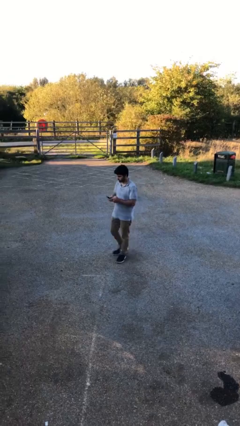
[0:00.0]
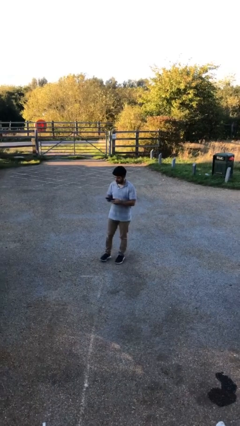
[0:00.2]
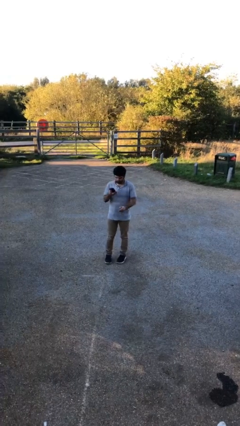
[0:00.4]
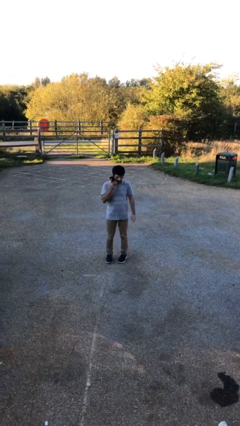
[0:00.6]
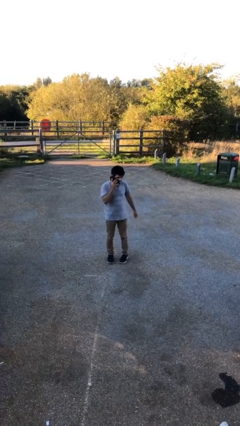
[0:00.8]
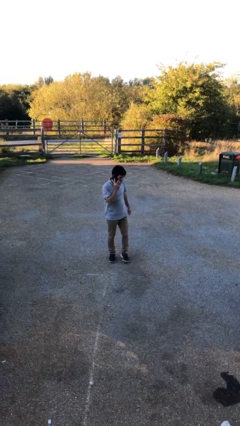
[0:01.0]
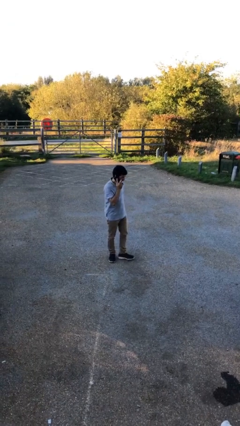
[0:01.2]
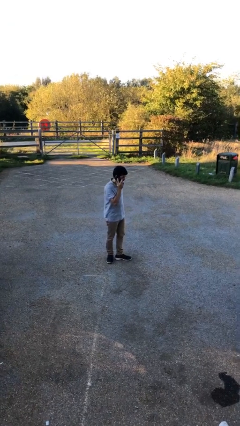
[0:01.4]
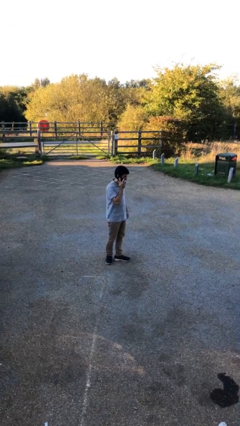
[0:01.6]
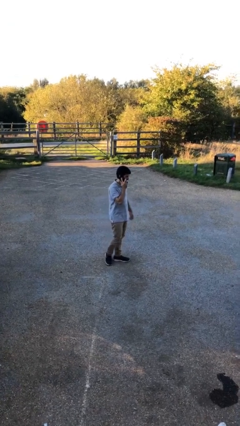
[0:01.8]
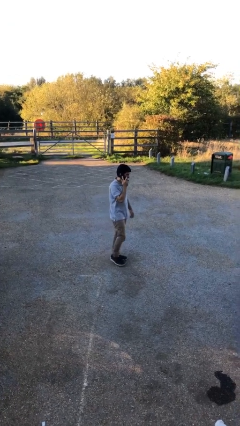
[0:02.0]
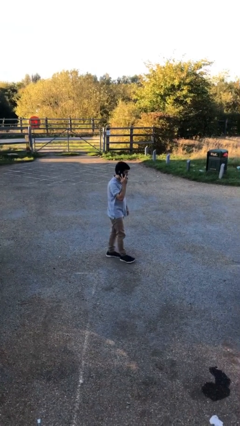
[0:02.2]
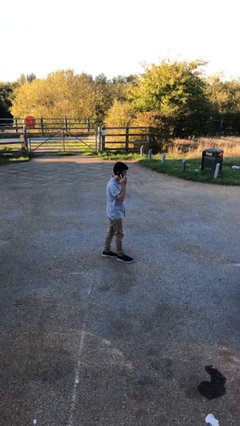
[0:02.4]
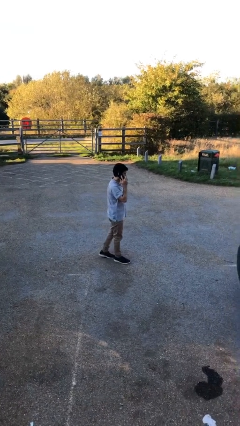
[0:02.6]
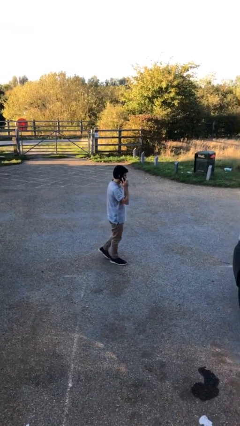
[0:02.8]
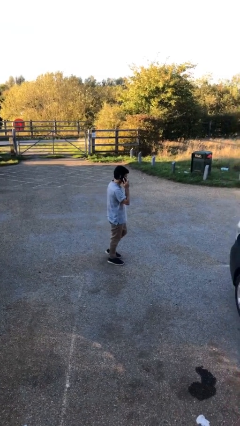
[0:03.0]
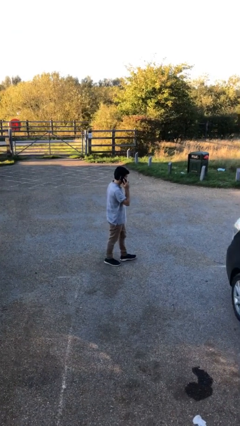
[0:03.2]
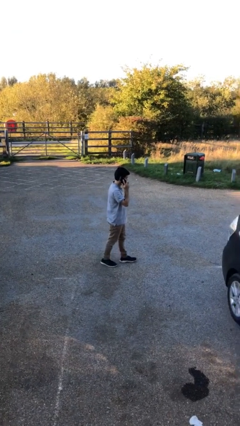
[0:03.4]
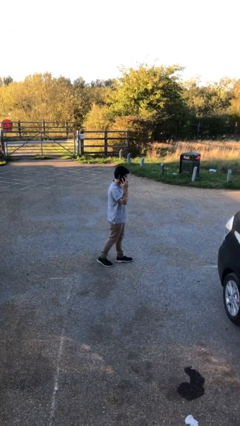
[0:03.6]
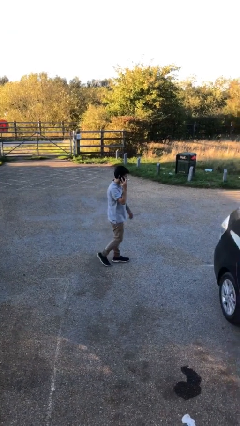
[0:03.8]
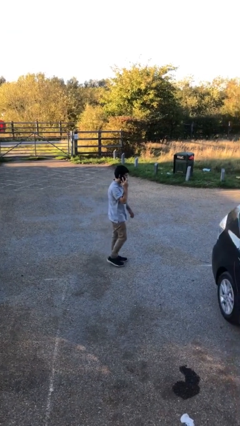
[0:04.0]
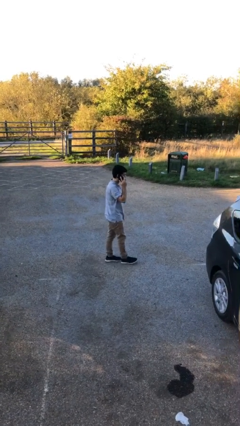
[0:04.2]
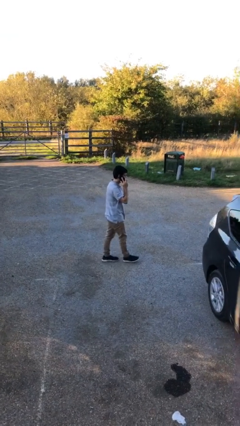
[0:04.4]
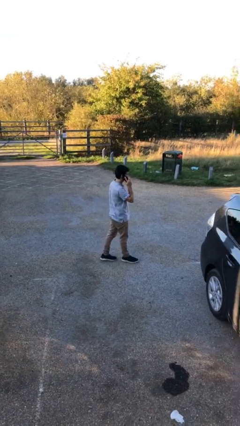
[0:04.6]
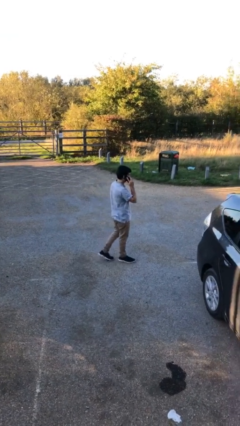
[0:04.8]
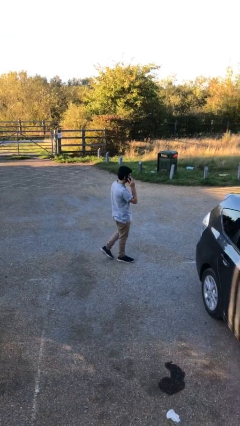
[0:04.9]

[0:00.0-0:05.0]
person talks on phone

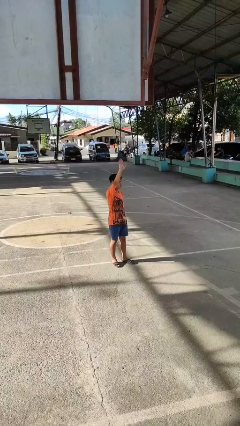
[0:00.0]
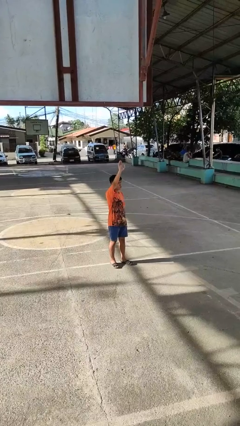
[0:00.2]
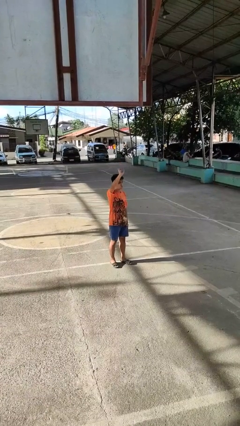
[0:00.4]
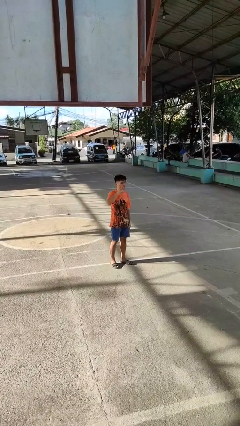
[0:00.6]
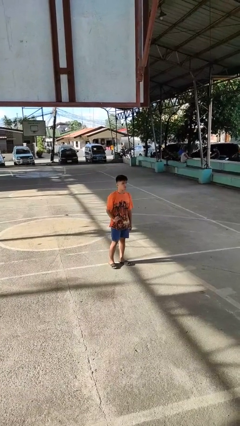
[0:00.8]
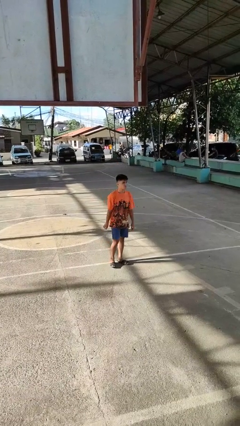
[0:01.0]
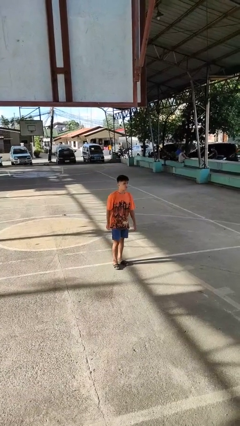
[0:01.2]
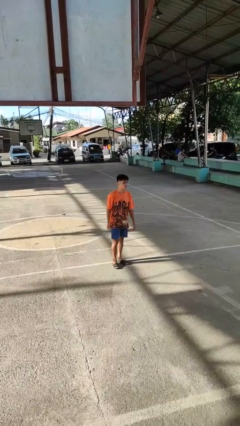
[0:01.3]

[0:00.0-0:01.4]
person gestures lower hand

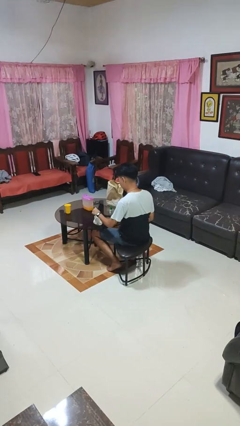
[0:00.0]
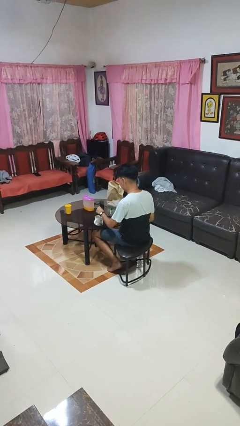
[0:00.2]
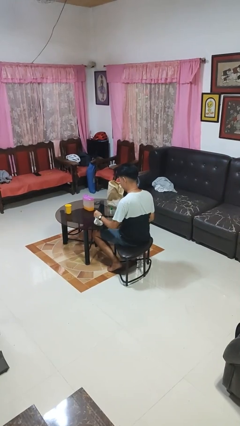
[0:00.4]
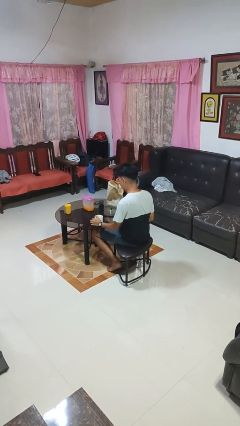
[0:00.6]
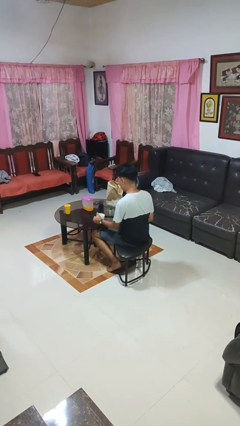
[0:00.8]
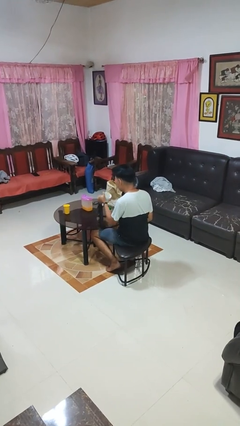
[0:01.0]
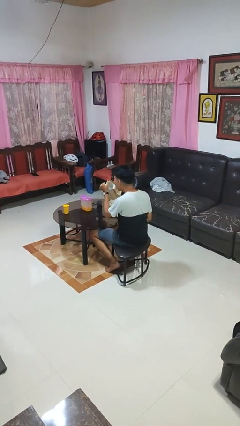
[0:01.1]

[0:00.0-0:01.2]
person stirs mug

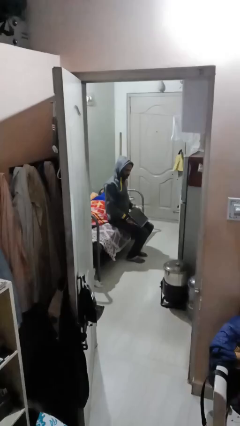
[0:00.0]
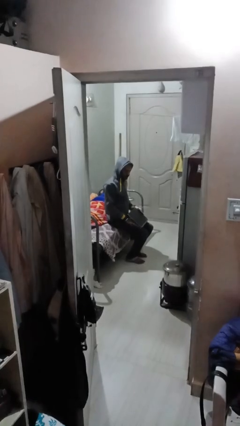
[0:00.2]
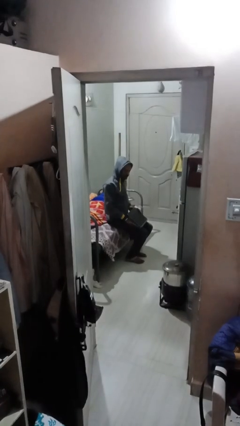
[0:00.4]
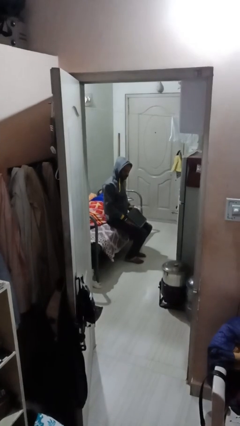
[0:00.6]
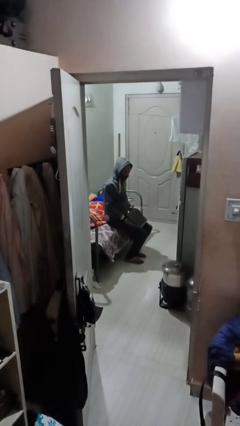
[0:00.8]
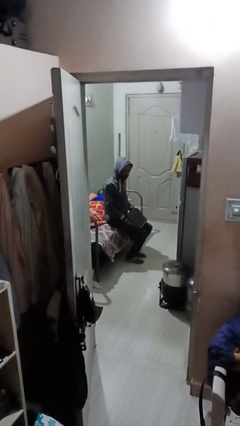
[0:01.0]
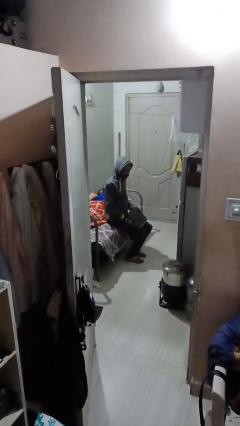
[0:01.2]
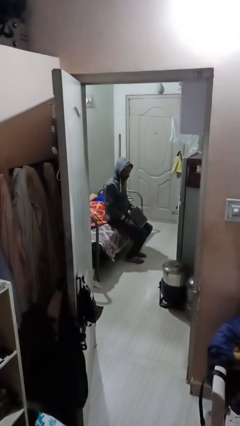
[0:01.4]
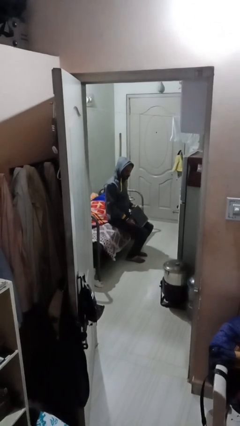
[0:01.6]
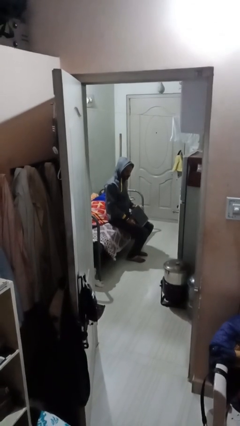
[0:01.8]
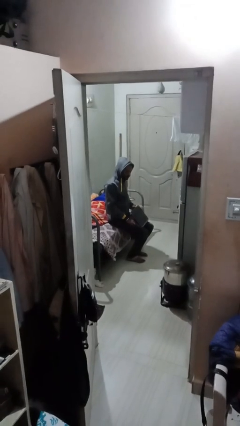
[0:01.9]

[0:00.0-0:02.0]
person interacts with laptop

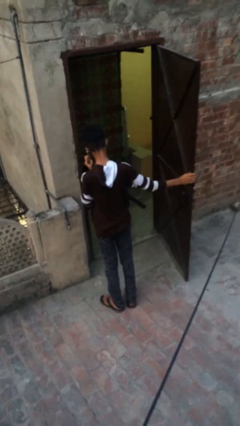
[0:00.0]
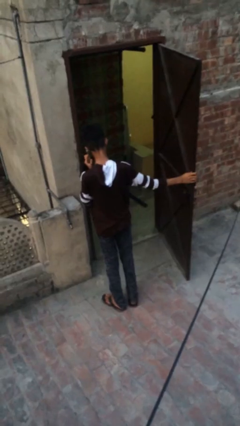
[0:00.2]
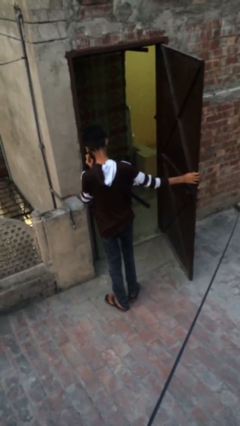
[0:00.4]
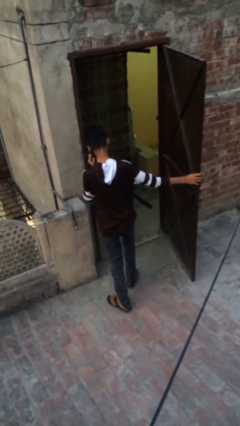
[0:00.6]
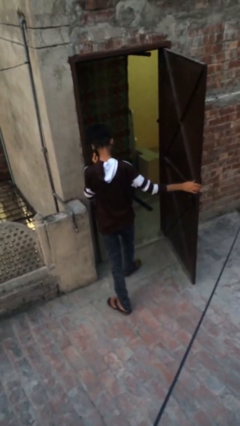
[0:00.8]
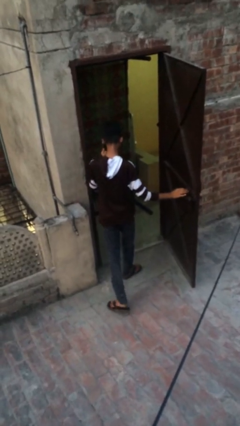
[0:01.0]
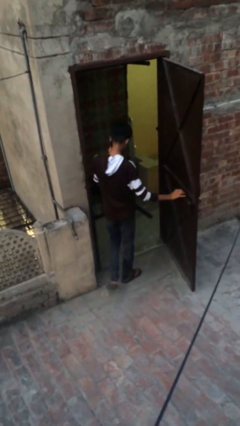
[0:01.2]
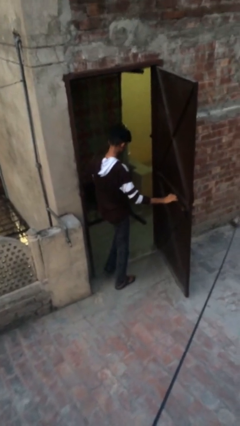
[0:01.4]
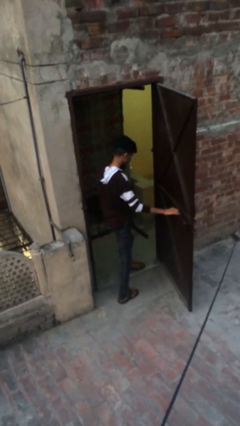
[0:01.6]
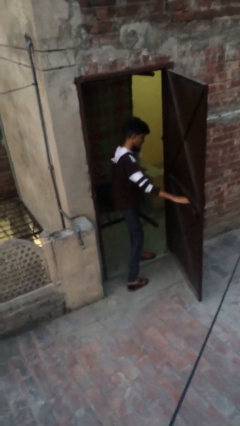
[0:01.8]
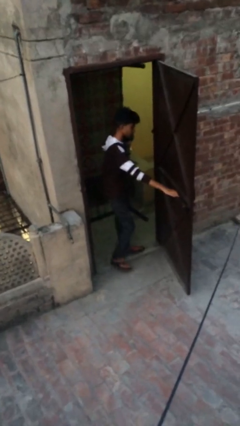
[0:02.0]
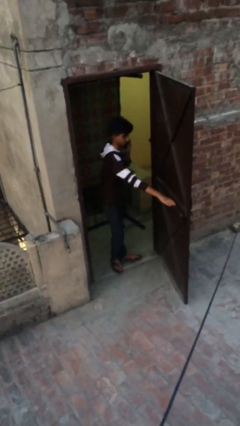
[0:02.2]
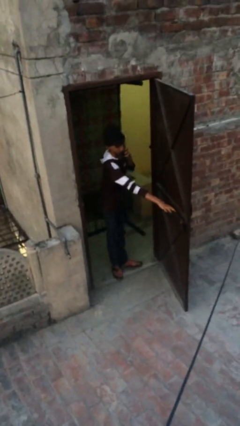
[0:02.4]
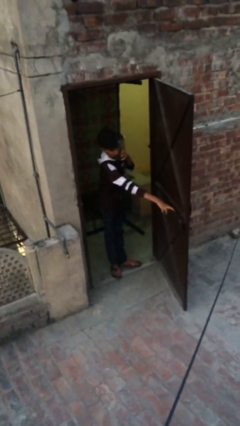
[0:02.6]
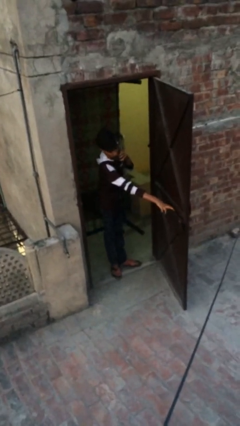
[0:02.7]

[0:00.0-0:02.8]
person exits scene through structure

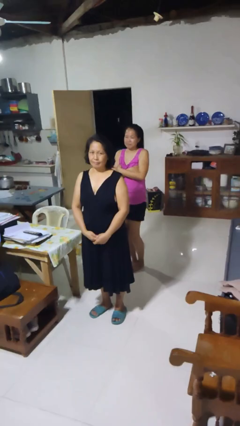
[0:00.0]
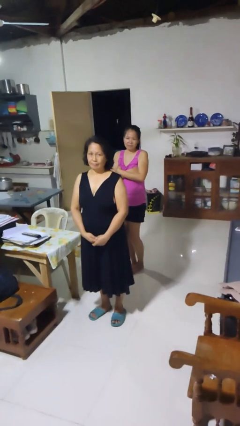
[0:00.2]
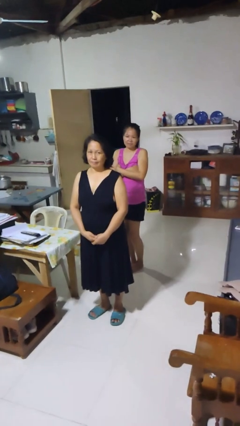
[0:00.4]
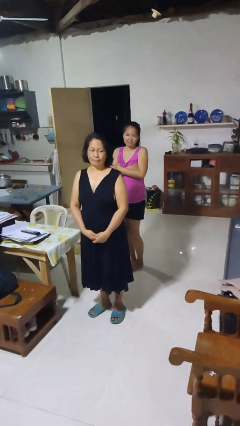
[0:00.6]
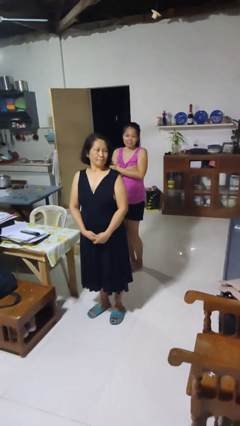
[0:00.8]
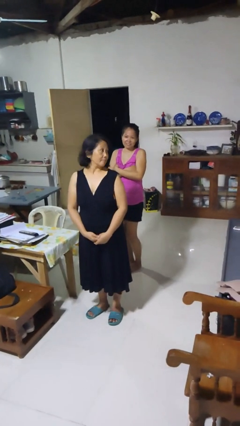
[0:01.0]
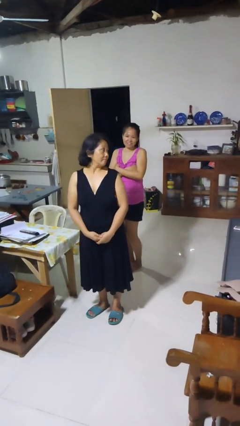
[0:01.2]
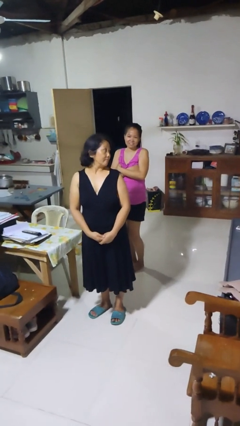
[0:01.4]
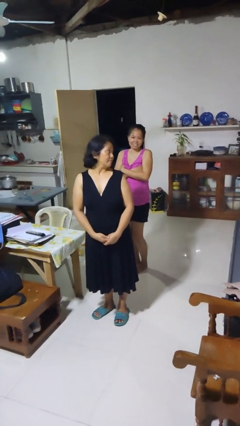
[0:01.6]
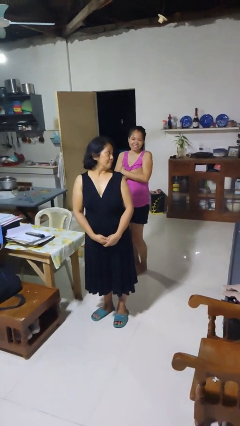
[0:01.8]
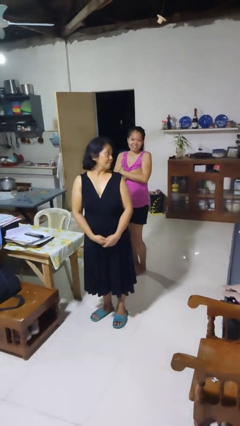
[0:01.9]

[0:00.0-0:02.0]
person looks over shoulder

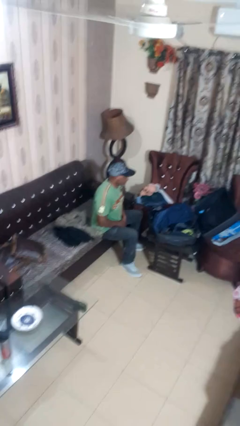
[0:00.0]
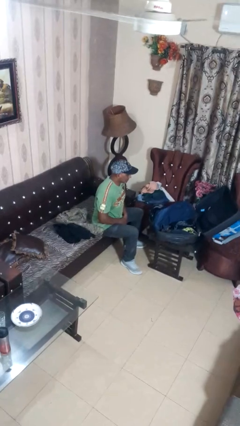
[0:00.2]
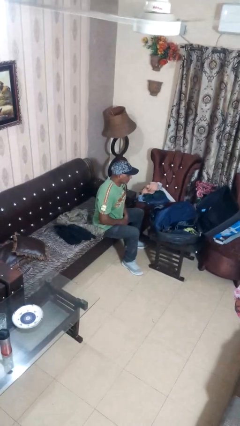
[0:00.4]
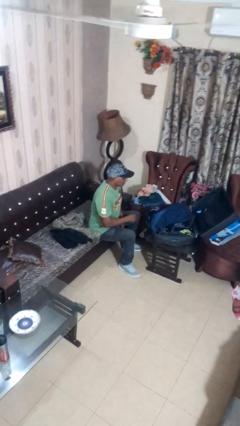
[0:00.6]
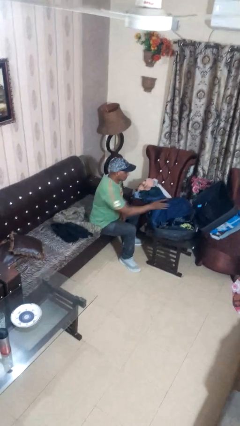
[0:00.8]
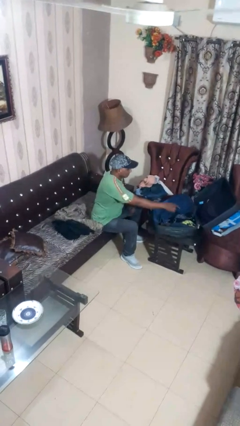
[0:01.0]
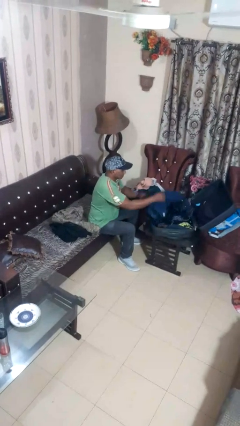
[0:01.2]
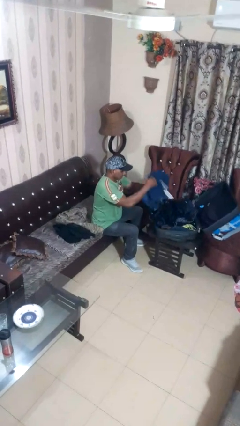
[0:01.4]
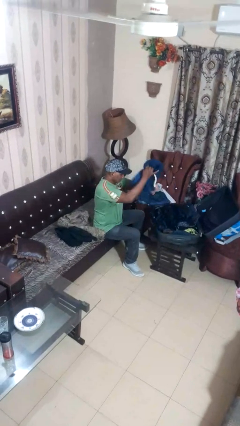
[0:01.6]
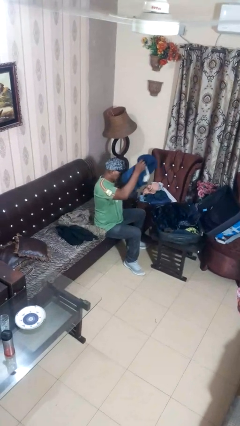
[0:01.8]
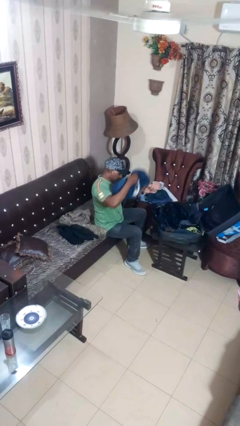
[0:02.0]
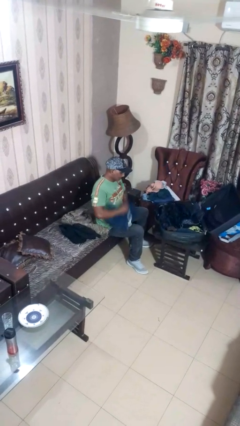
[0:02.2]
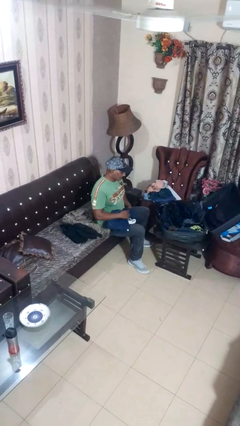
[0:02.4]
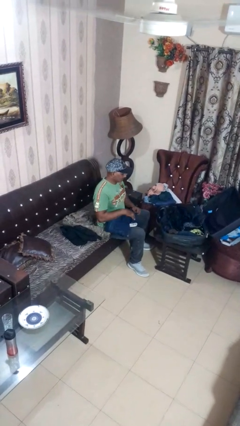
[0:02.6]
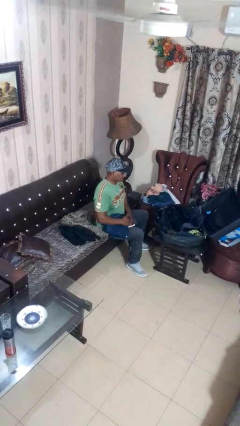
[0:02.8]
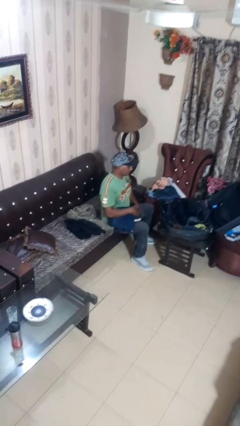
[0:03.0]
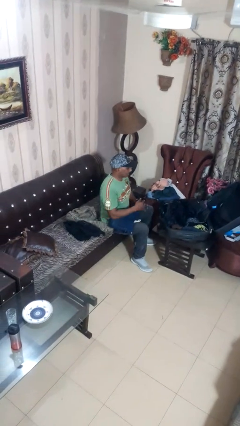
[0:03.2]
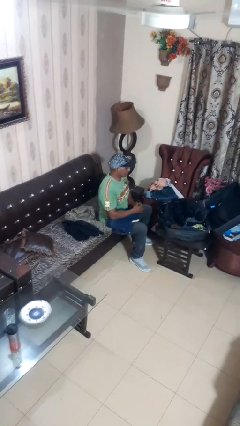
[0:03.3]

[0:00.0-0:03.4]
person unloads clothes from suitcase
